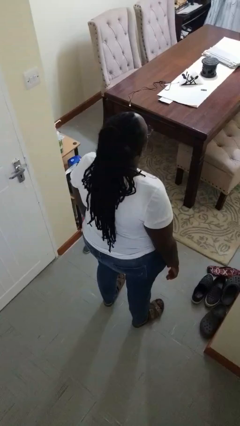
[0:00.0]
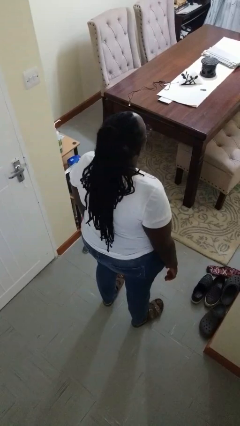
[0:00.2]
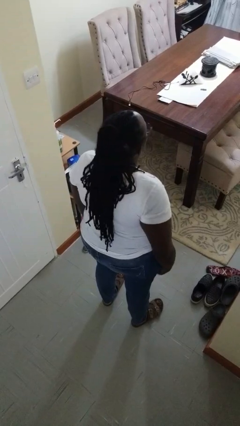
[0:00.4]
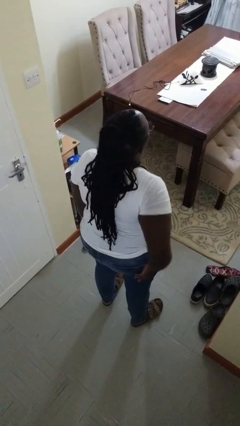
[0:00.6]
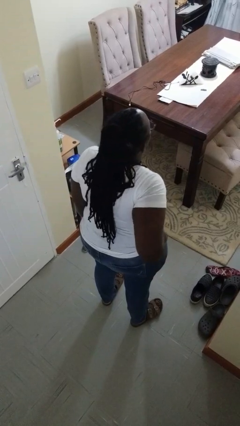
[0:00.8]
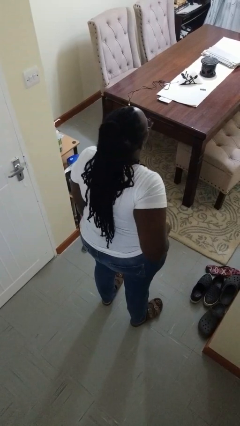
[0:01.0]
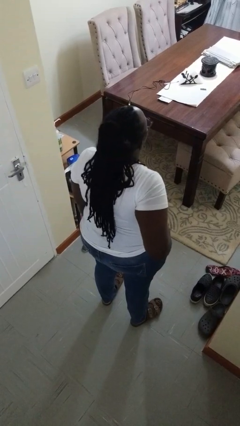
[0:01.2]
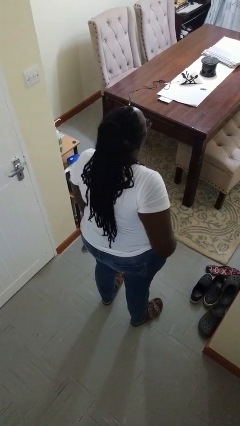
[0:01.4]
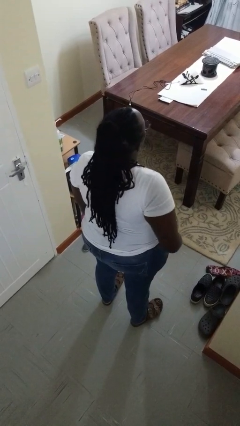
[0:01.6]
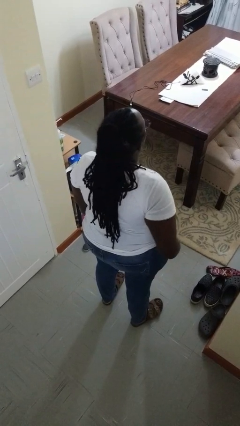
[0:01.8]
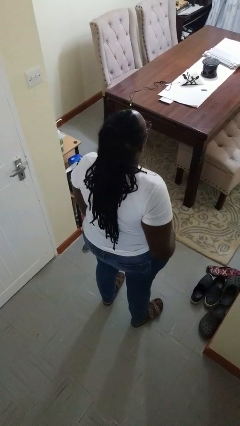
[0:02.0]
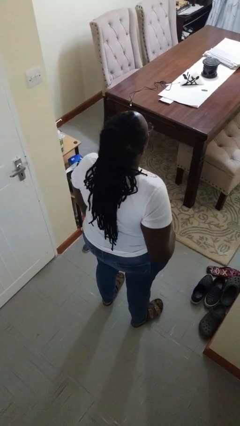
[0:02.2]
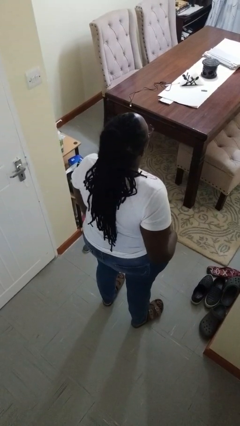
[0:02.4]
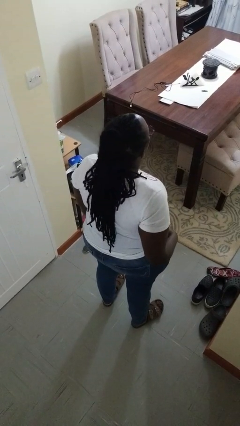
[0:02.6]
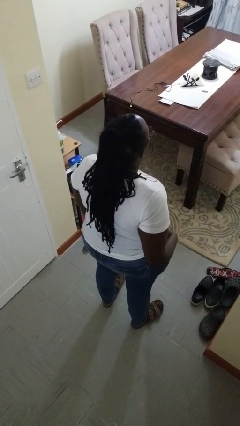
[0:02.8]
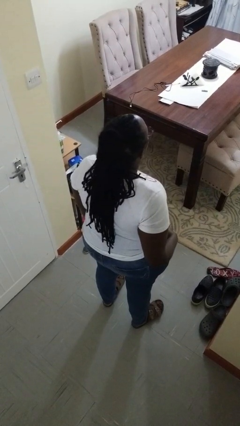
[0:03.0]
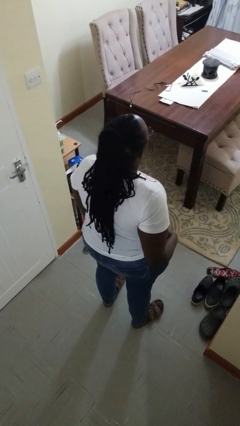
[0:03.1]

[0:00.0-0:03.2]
person puts hands in back pockets

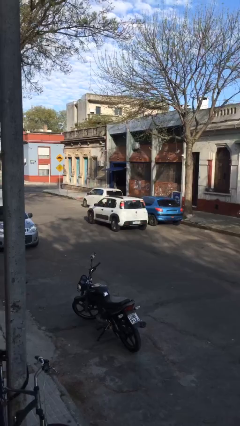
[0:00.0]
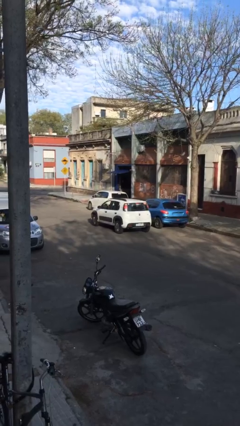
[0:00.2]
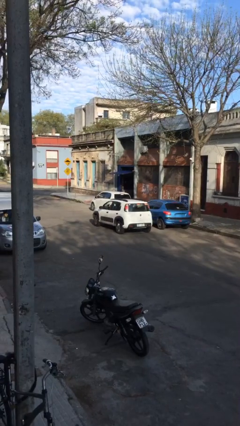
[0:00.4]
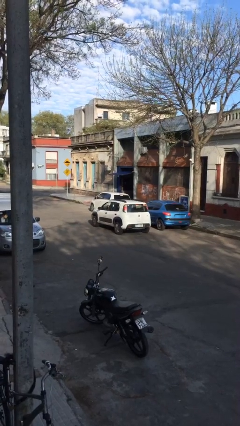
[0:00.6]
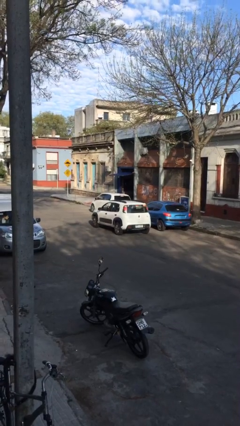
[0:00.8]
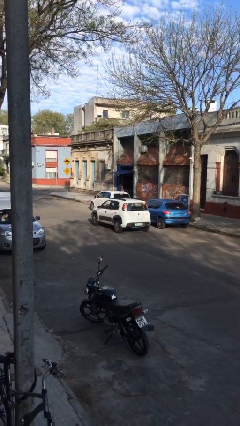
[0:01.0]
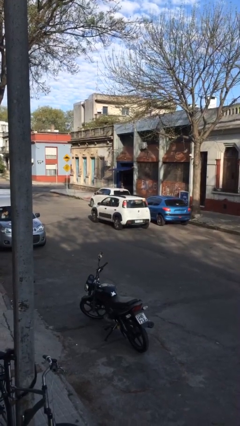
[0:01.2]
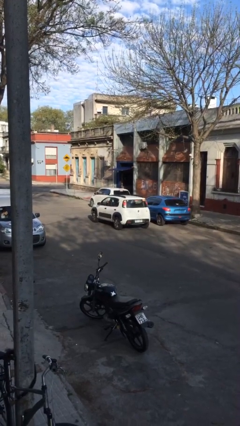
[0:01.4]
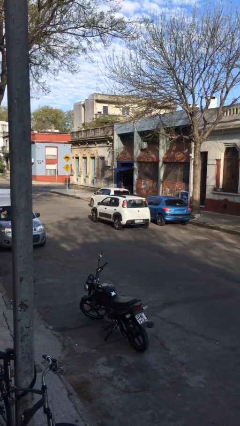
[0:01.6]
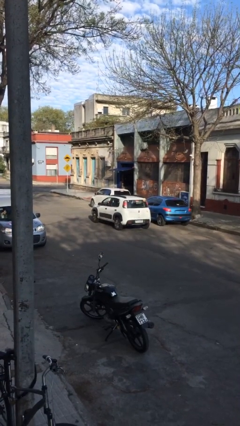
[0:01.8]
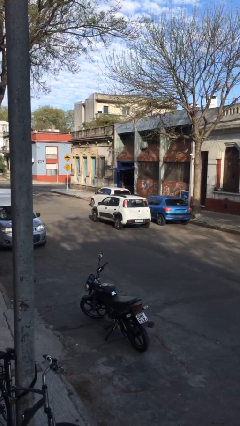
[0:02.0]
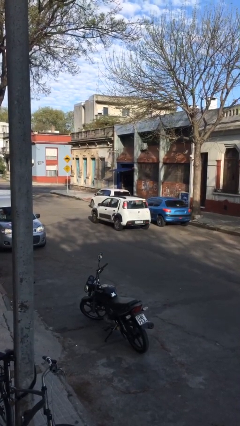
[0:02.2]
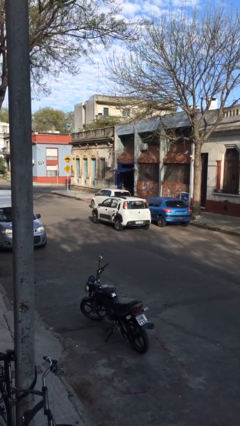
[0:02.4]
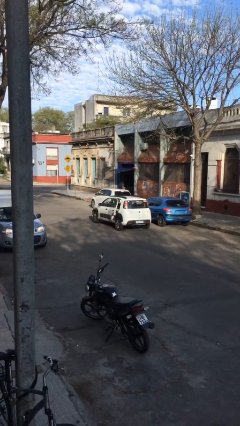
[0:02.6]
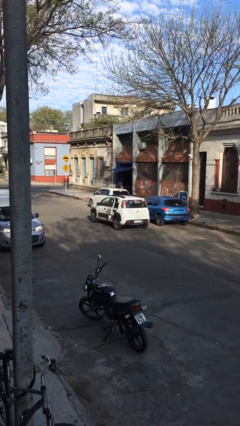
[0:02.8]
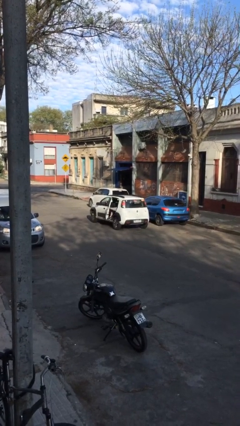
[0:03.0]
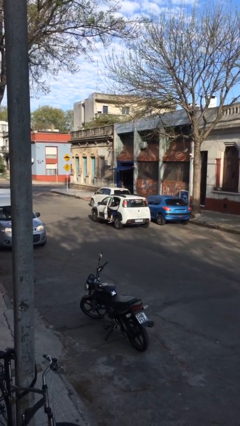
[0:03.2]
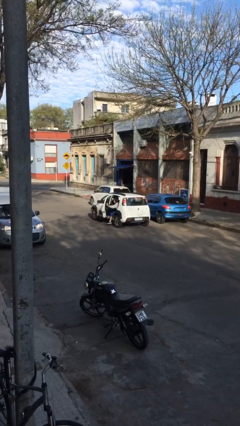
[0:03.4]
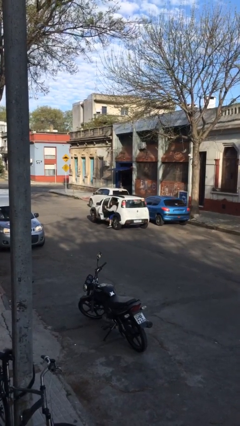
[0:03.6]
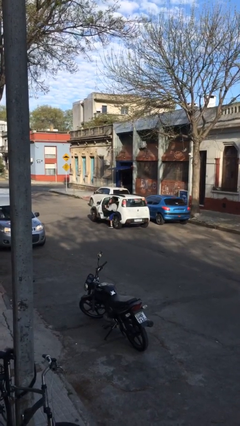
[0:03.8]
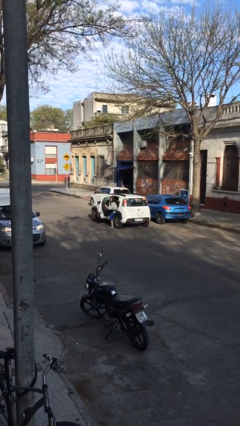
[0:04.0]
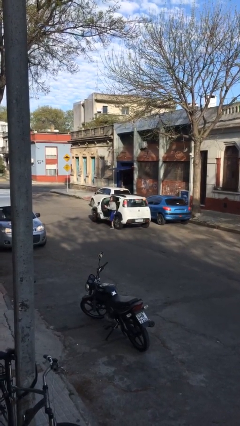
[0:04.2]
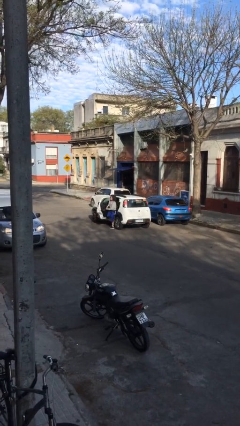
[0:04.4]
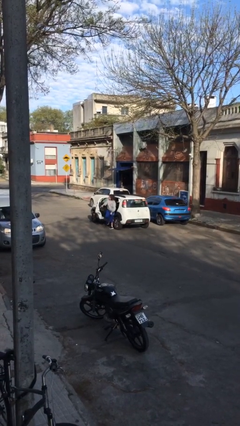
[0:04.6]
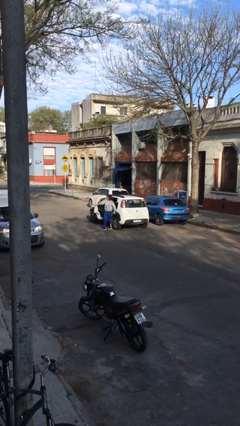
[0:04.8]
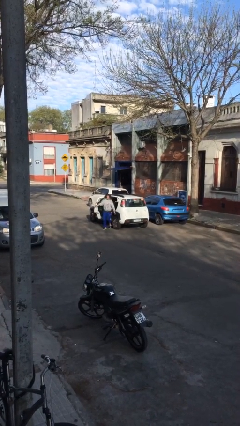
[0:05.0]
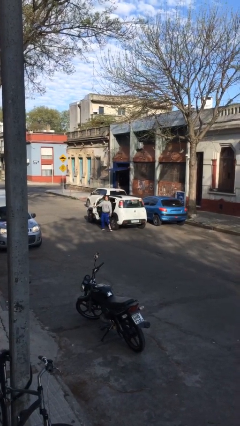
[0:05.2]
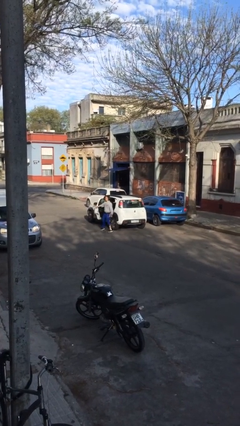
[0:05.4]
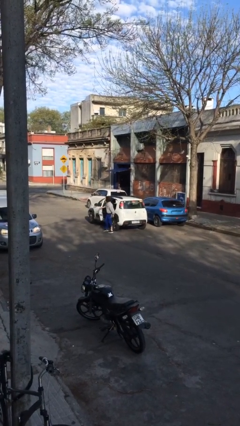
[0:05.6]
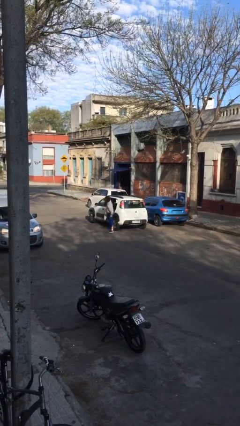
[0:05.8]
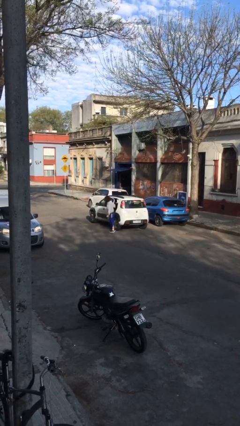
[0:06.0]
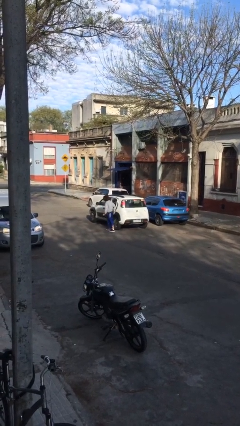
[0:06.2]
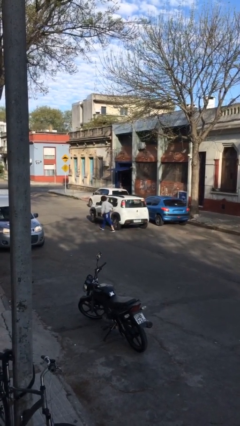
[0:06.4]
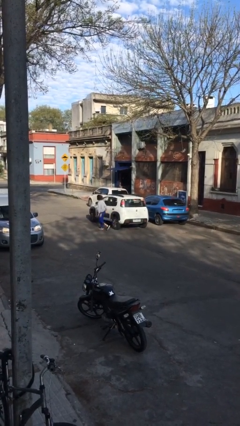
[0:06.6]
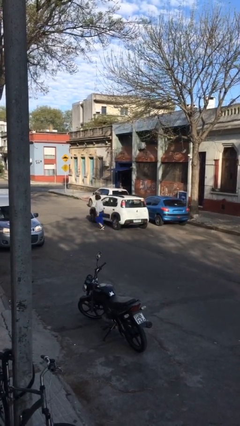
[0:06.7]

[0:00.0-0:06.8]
car drops off person

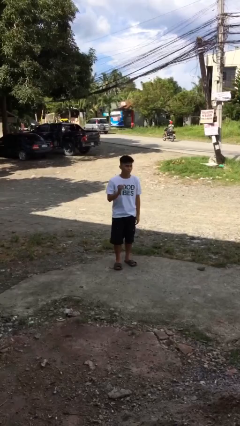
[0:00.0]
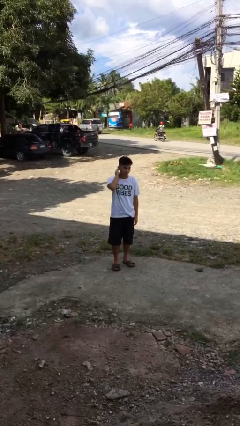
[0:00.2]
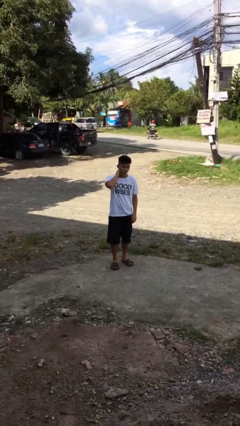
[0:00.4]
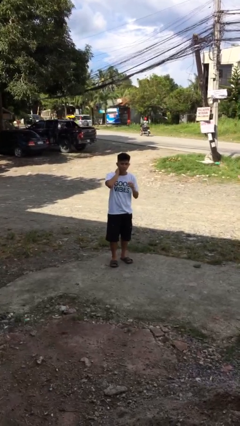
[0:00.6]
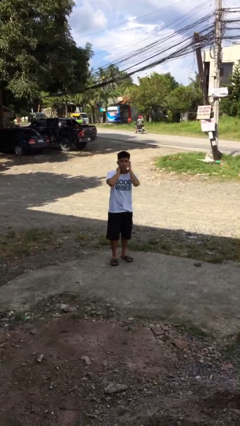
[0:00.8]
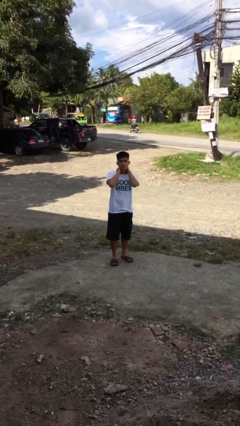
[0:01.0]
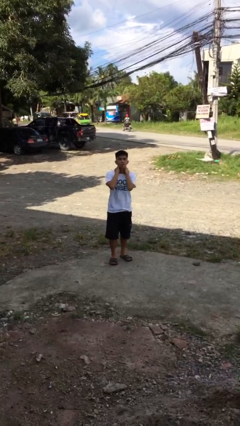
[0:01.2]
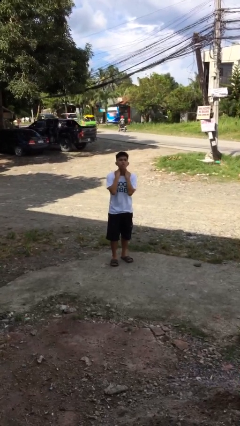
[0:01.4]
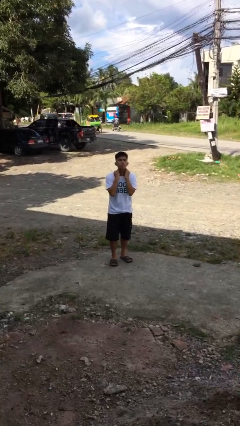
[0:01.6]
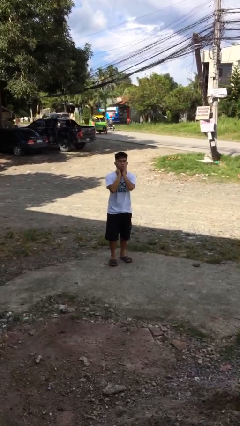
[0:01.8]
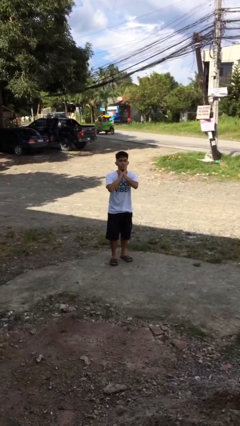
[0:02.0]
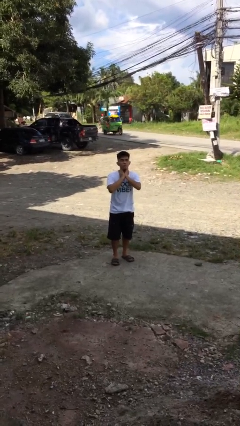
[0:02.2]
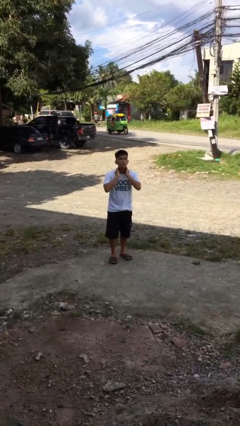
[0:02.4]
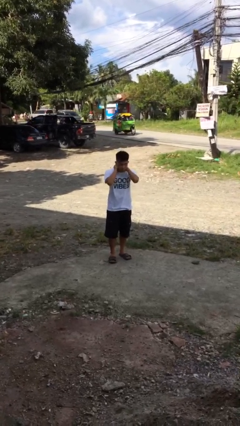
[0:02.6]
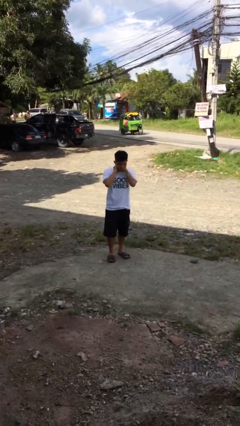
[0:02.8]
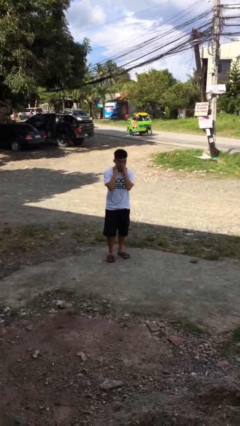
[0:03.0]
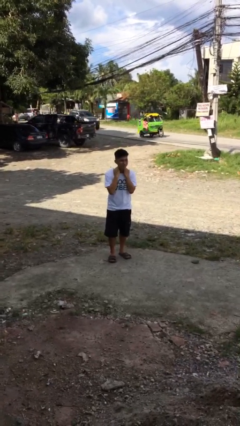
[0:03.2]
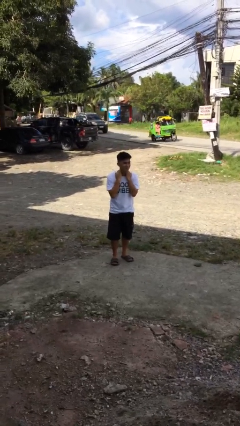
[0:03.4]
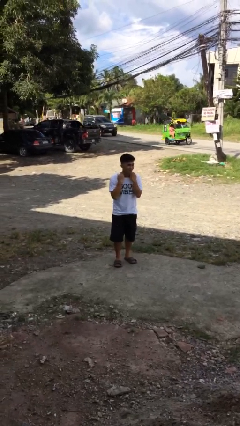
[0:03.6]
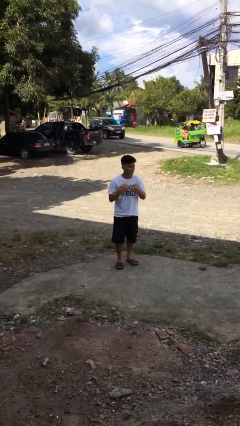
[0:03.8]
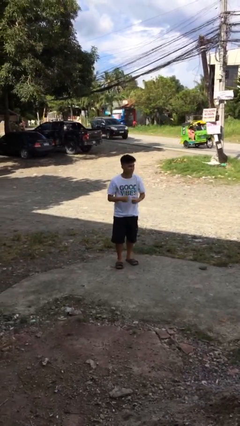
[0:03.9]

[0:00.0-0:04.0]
person rubs neck

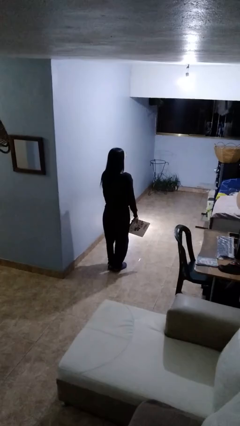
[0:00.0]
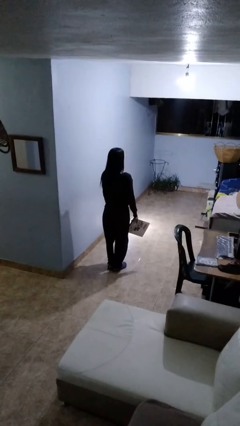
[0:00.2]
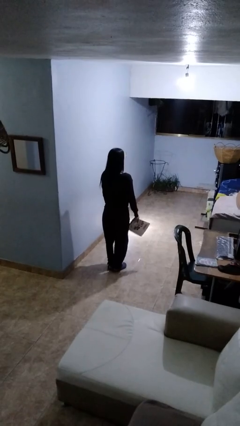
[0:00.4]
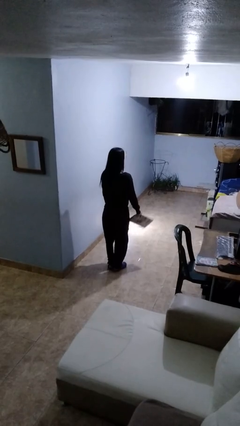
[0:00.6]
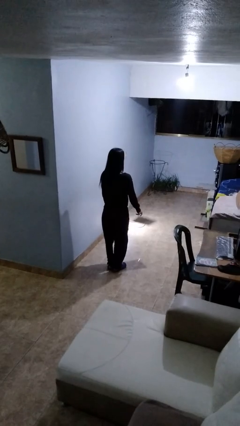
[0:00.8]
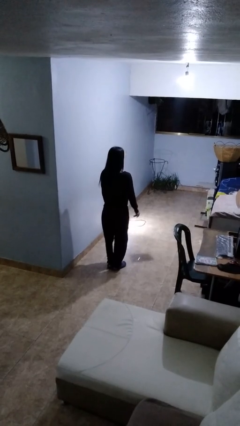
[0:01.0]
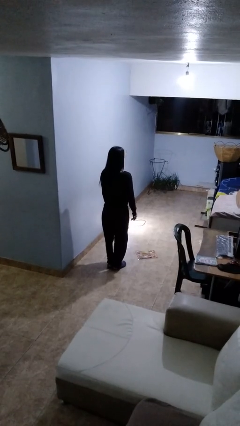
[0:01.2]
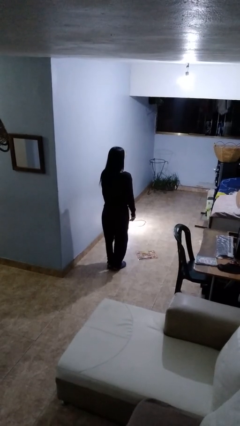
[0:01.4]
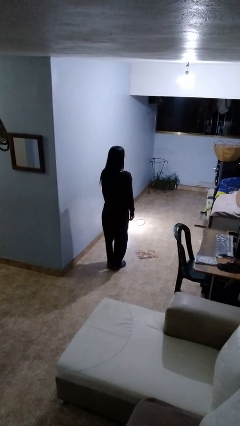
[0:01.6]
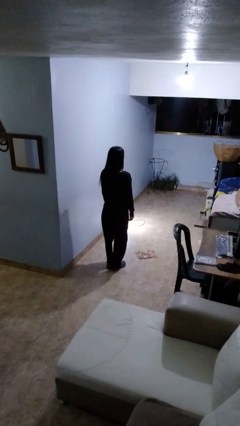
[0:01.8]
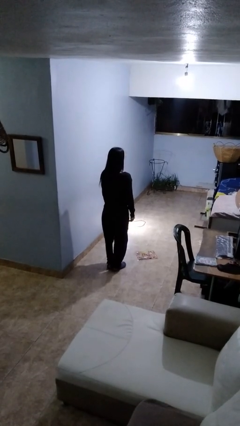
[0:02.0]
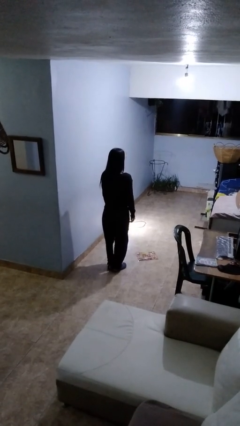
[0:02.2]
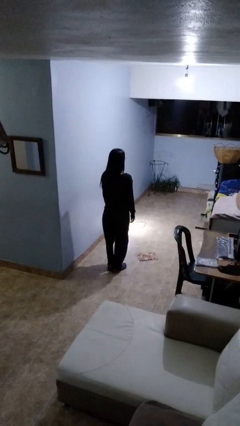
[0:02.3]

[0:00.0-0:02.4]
person throws object to ground

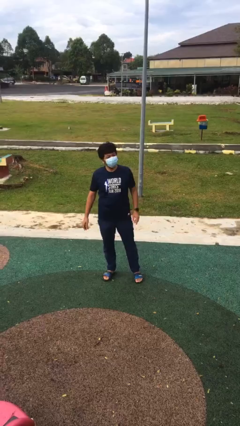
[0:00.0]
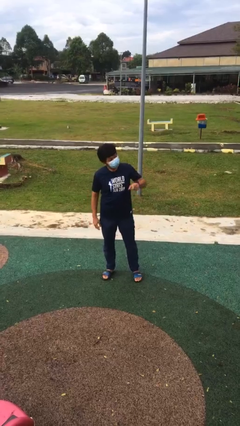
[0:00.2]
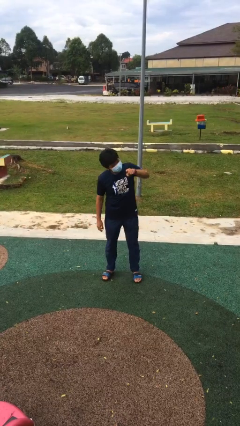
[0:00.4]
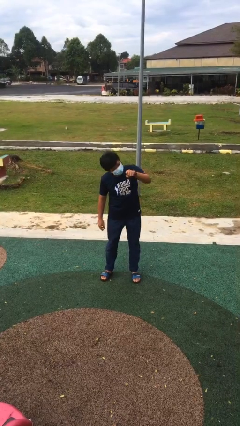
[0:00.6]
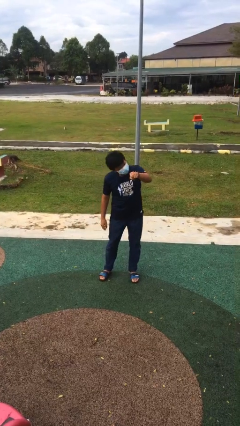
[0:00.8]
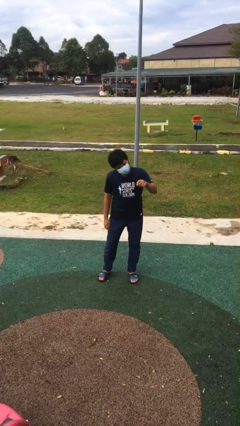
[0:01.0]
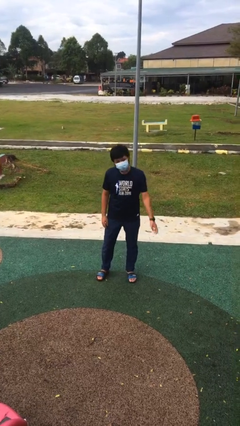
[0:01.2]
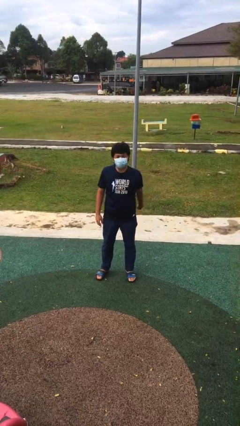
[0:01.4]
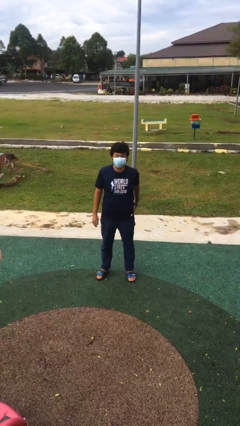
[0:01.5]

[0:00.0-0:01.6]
person points at person
